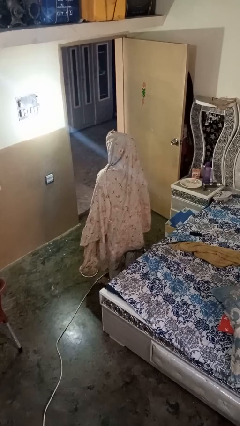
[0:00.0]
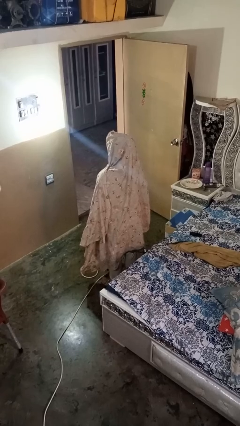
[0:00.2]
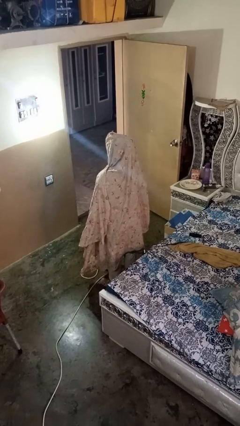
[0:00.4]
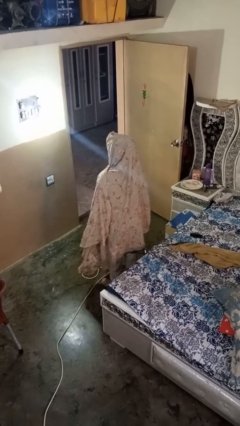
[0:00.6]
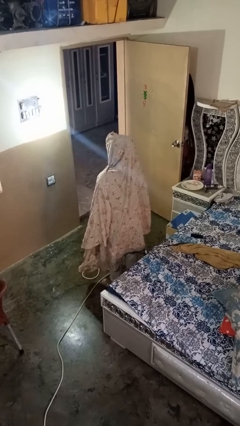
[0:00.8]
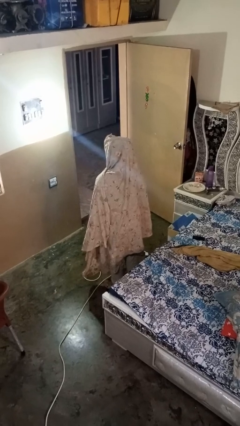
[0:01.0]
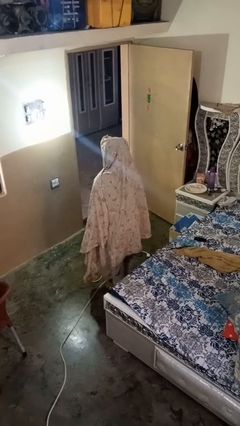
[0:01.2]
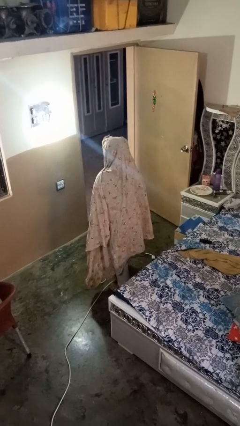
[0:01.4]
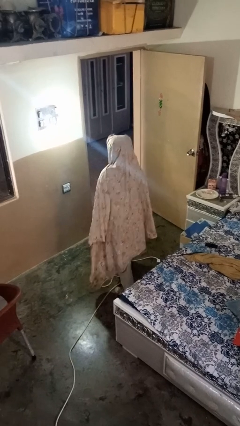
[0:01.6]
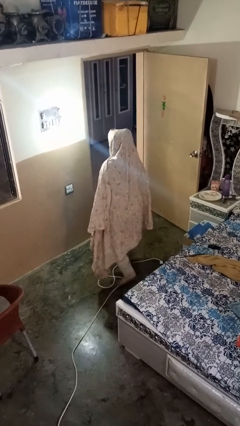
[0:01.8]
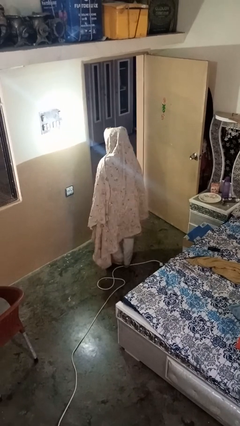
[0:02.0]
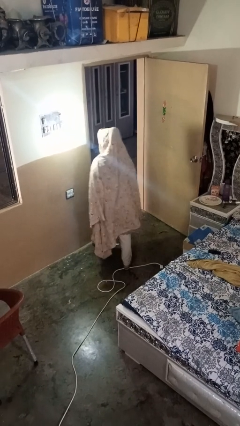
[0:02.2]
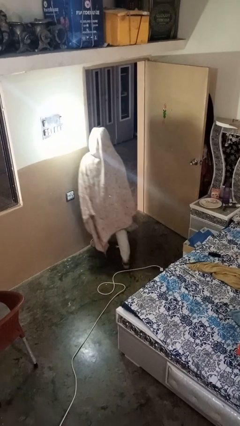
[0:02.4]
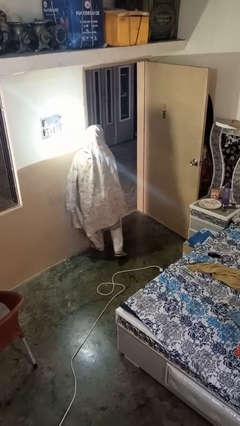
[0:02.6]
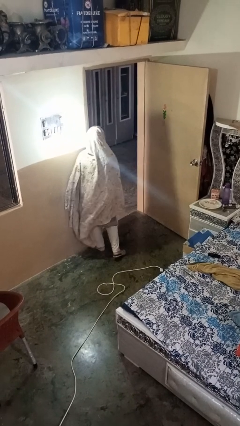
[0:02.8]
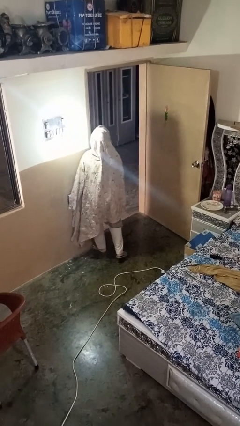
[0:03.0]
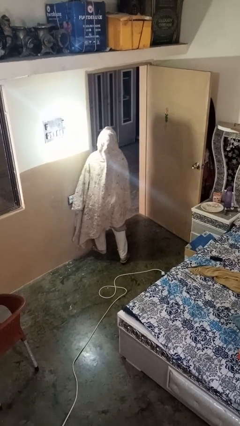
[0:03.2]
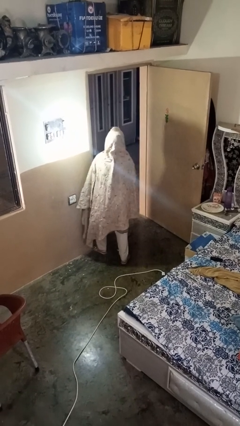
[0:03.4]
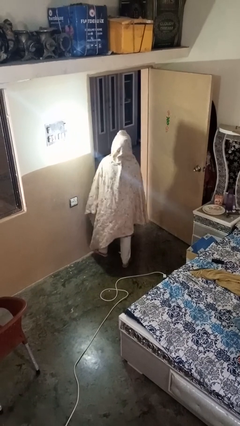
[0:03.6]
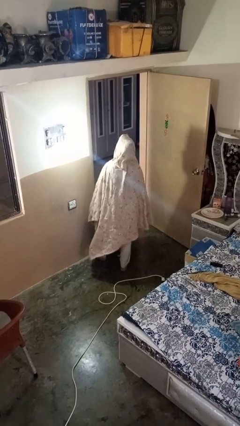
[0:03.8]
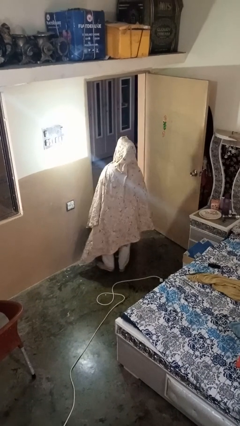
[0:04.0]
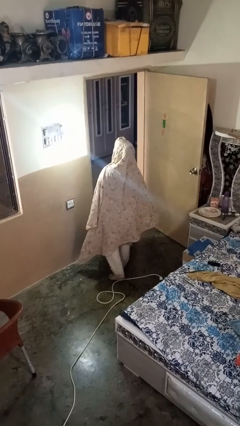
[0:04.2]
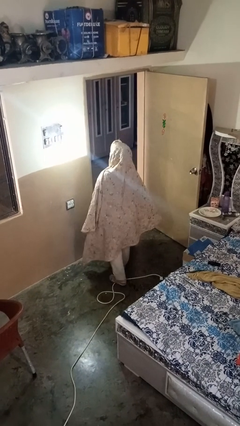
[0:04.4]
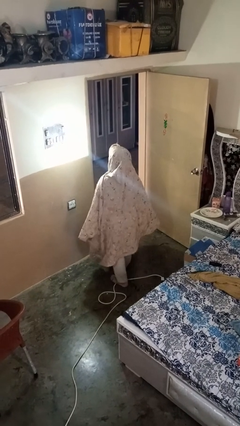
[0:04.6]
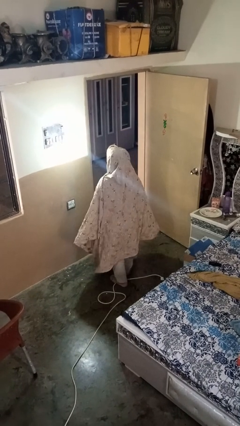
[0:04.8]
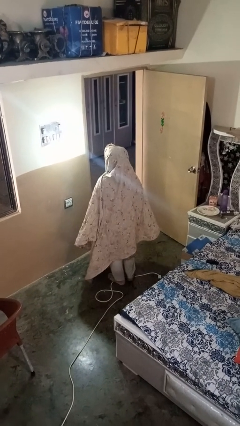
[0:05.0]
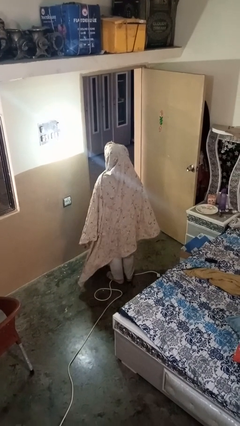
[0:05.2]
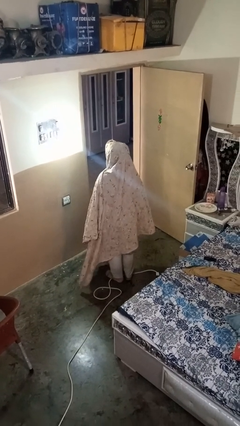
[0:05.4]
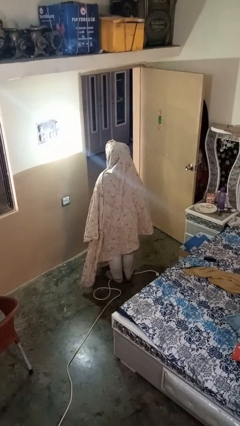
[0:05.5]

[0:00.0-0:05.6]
person bumps into wall

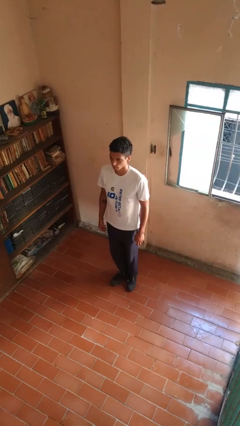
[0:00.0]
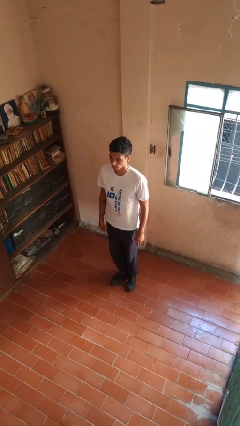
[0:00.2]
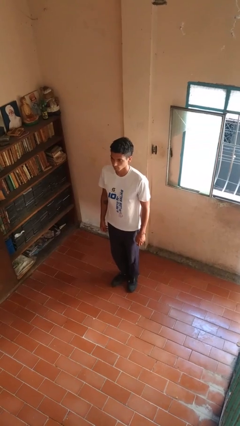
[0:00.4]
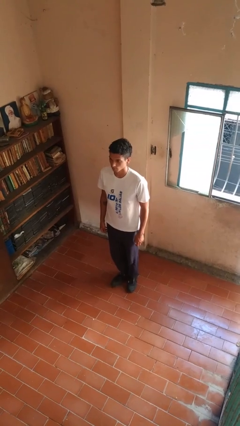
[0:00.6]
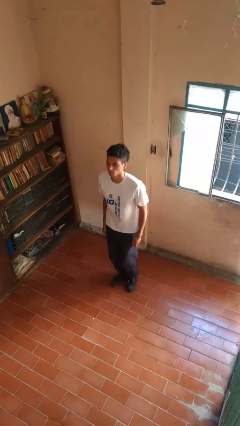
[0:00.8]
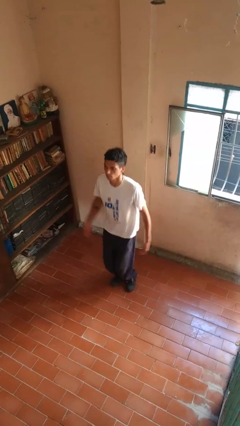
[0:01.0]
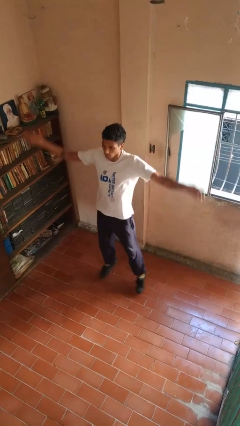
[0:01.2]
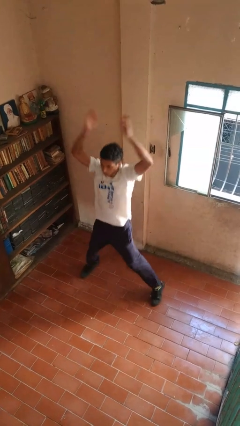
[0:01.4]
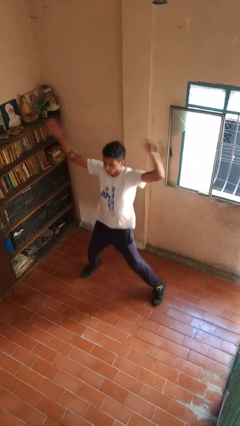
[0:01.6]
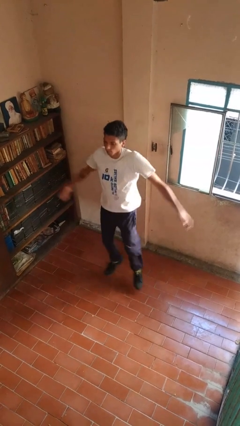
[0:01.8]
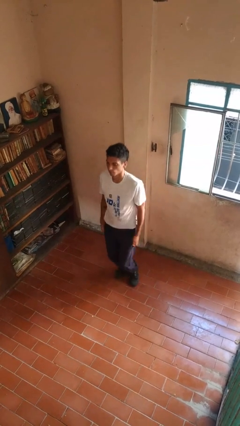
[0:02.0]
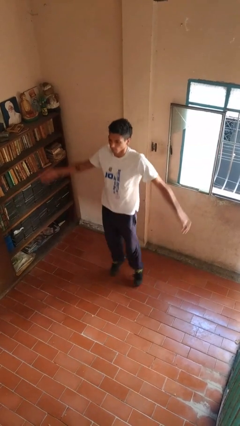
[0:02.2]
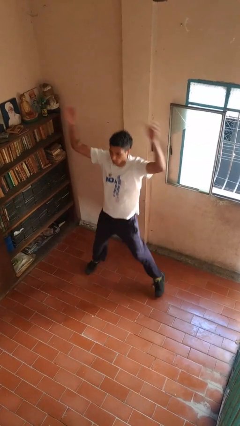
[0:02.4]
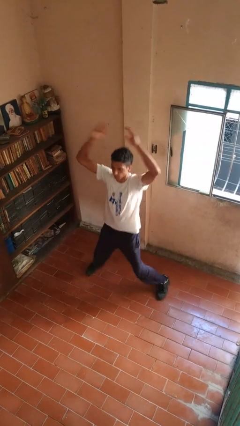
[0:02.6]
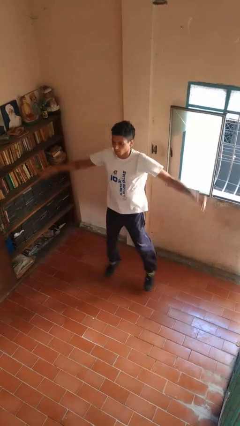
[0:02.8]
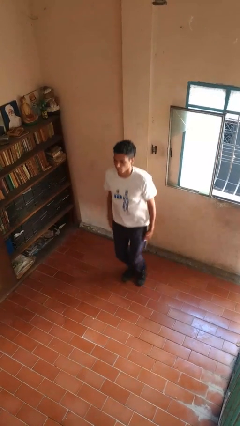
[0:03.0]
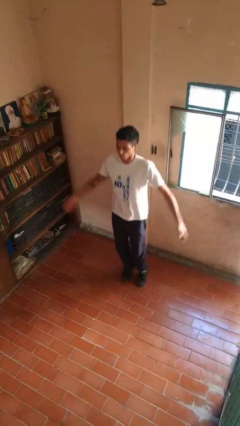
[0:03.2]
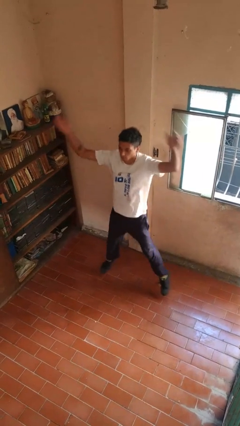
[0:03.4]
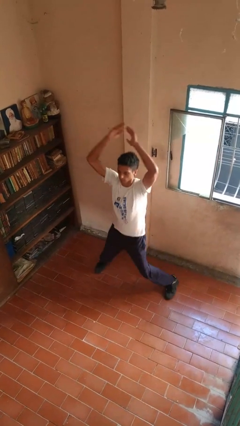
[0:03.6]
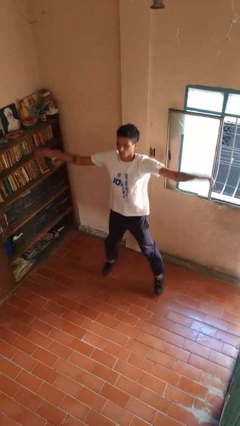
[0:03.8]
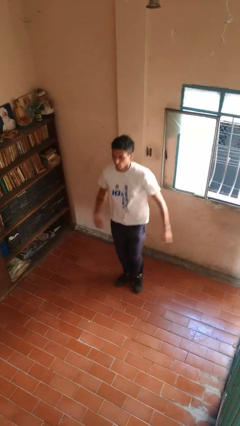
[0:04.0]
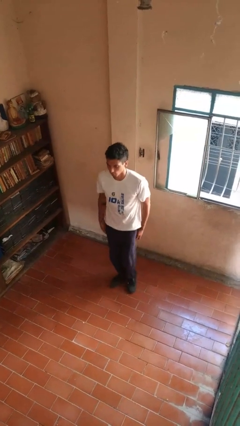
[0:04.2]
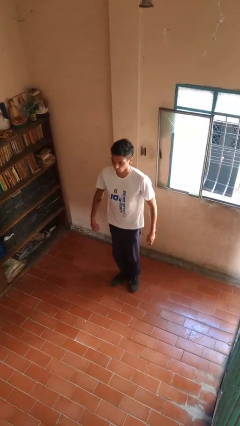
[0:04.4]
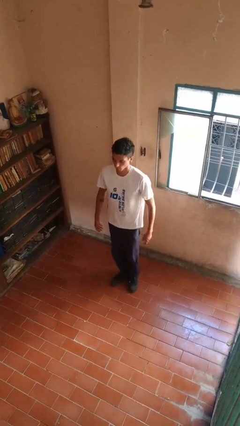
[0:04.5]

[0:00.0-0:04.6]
person exercises with jumping jacks

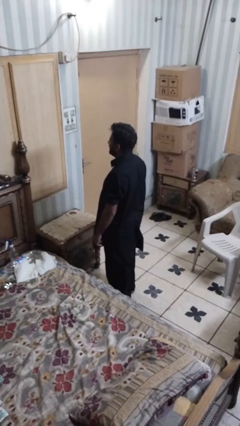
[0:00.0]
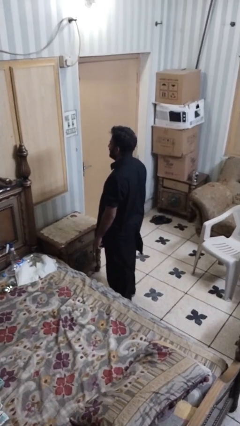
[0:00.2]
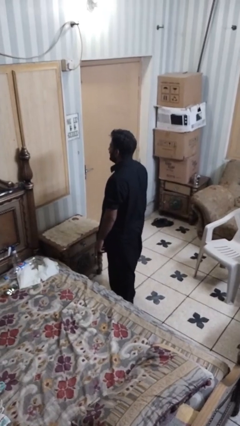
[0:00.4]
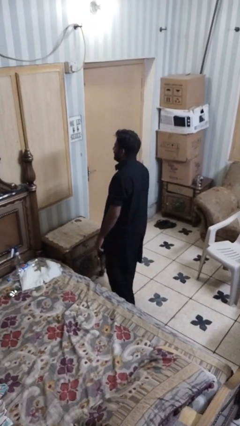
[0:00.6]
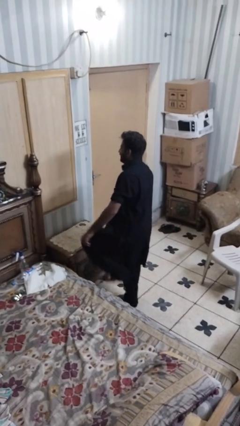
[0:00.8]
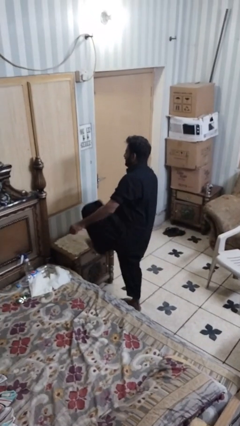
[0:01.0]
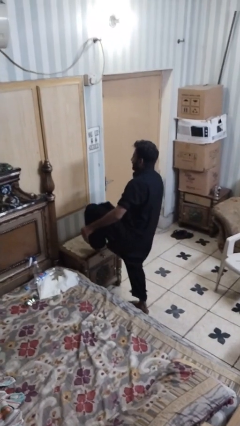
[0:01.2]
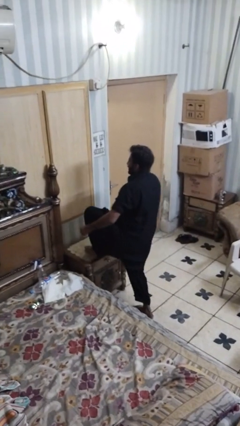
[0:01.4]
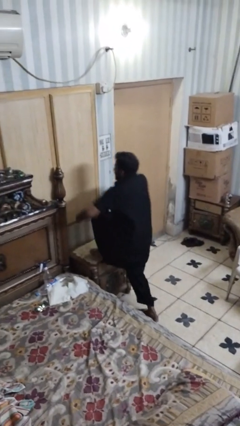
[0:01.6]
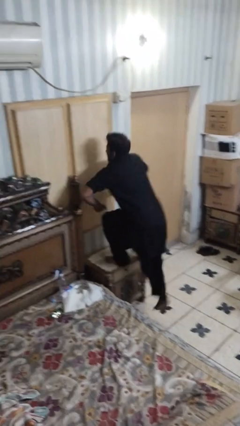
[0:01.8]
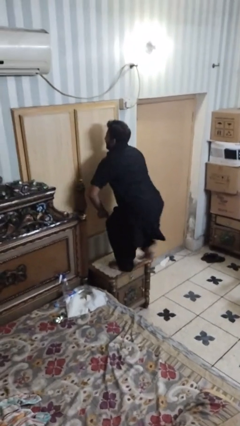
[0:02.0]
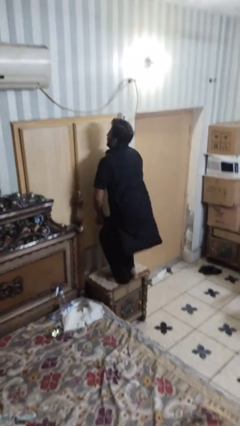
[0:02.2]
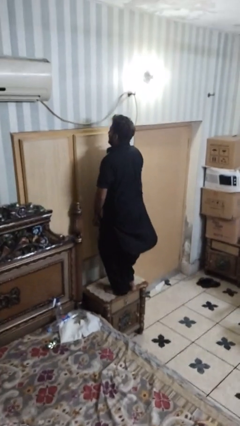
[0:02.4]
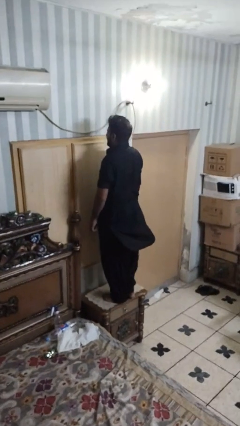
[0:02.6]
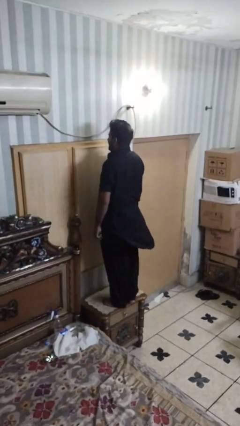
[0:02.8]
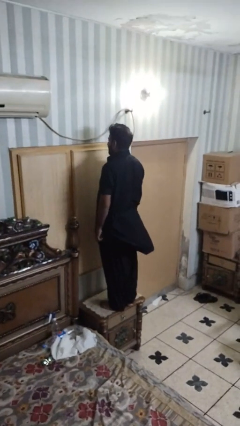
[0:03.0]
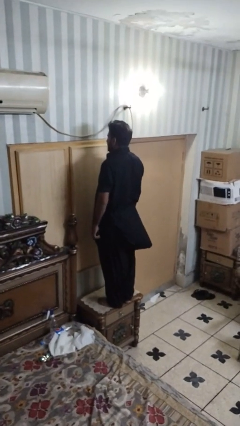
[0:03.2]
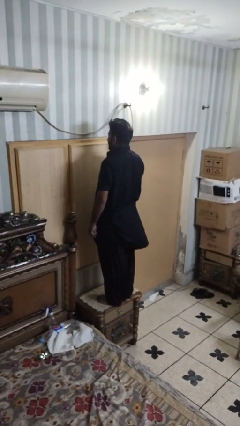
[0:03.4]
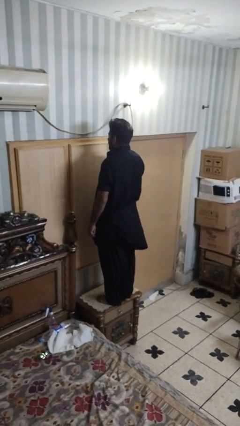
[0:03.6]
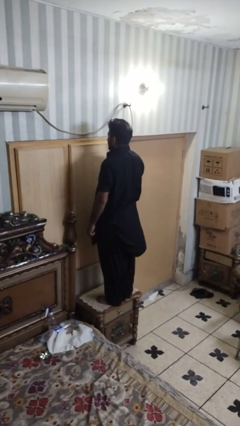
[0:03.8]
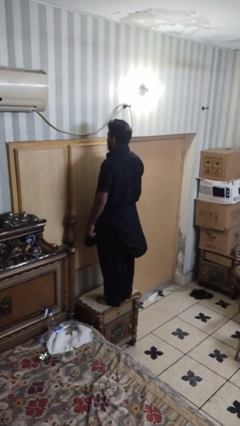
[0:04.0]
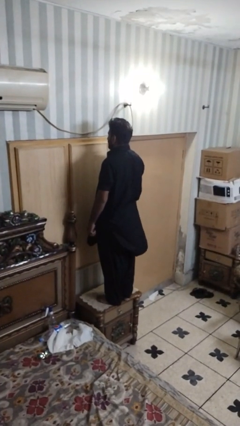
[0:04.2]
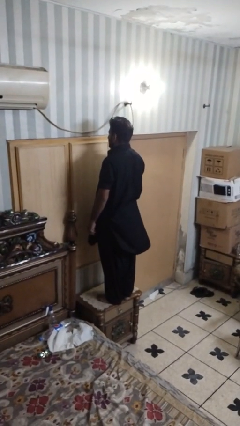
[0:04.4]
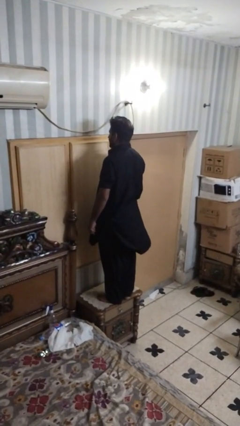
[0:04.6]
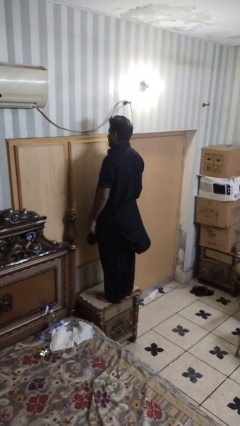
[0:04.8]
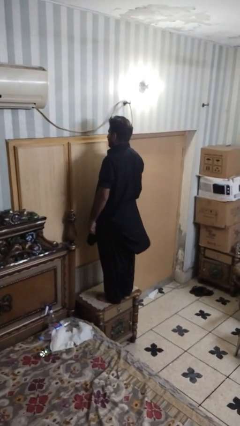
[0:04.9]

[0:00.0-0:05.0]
person climbs on table

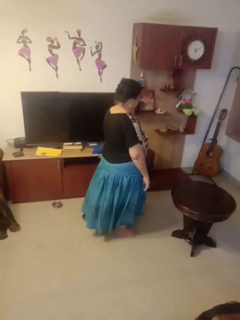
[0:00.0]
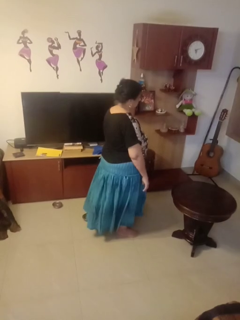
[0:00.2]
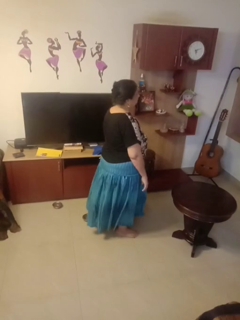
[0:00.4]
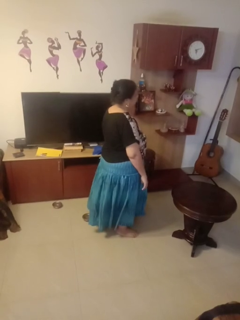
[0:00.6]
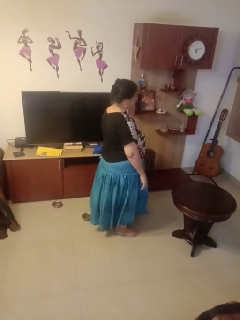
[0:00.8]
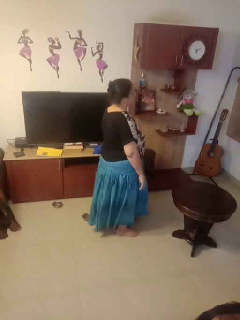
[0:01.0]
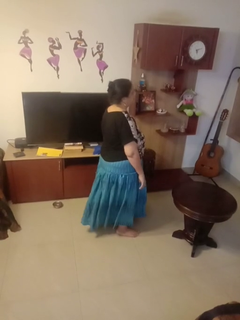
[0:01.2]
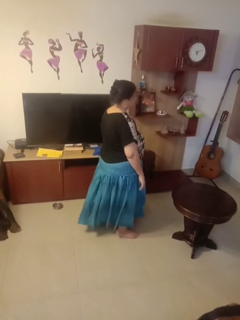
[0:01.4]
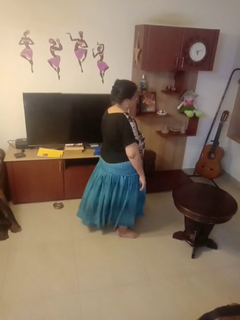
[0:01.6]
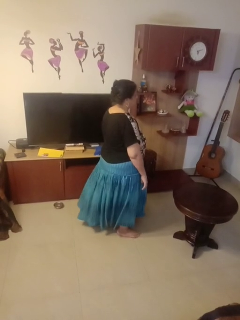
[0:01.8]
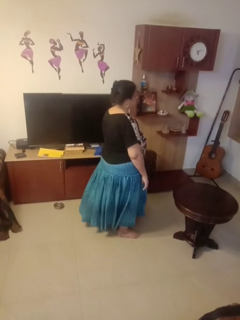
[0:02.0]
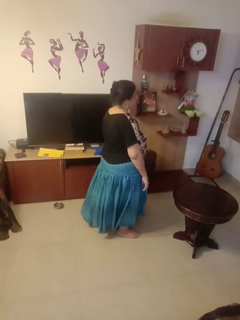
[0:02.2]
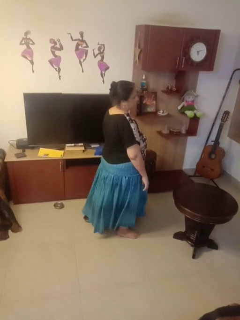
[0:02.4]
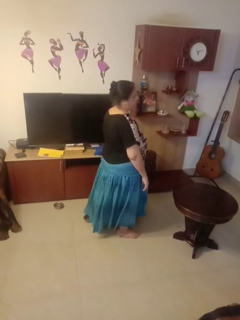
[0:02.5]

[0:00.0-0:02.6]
person nods head

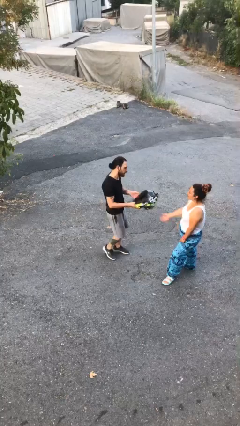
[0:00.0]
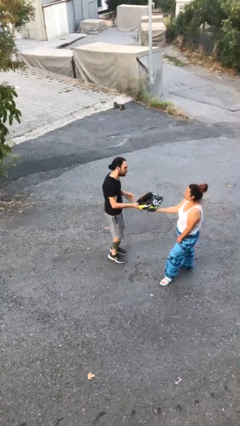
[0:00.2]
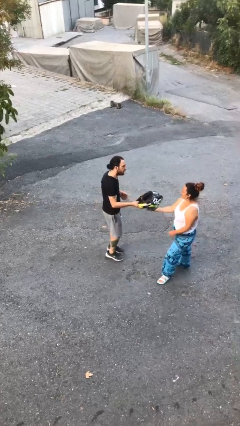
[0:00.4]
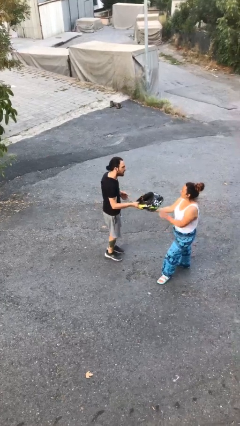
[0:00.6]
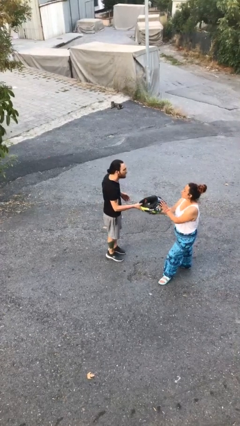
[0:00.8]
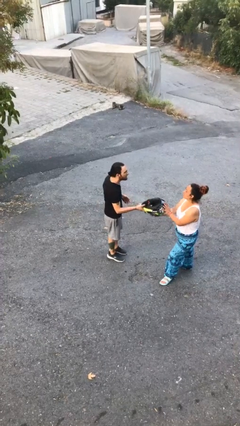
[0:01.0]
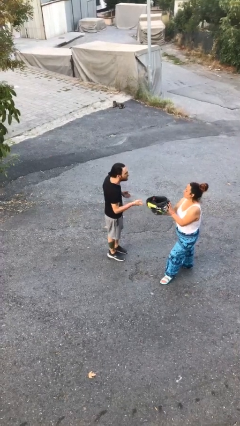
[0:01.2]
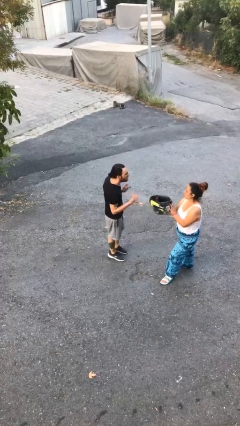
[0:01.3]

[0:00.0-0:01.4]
person transfers object to person
